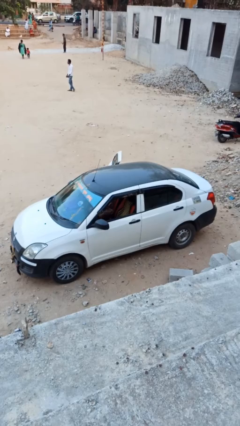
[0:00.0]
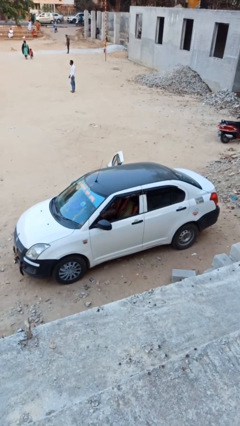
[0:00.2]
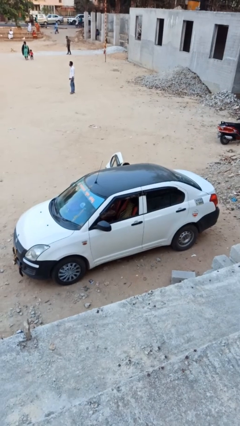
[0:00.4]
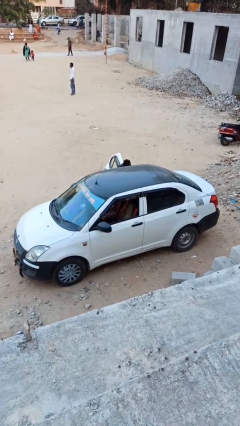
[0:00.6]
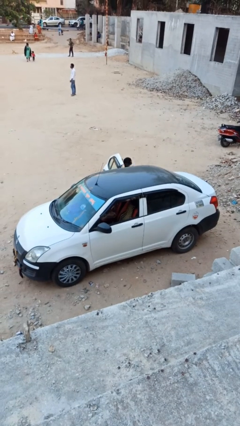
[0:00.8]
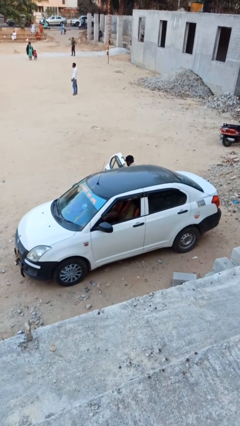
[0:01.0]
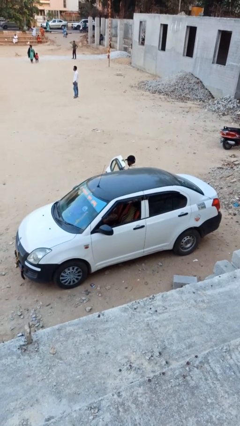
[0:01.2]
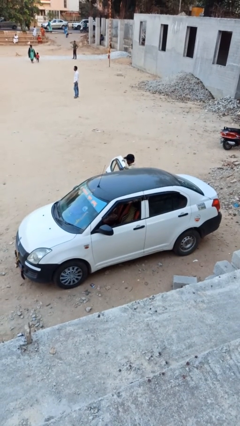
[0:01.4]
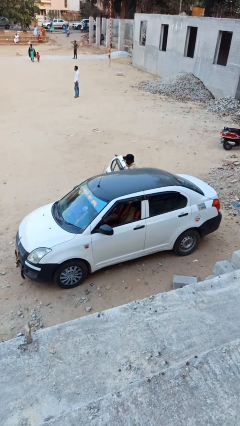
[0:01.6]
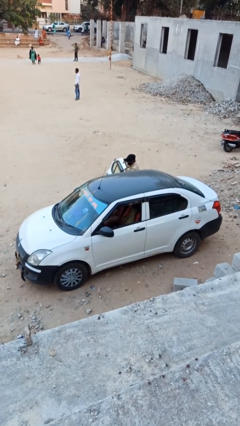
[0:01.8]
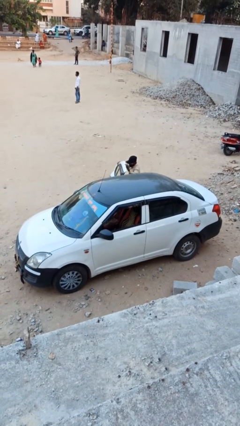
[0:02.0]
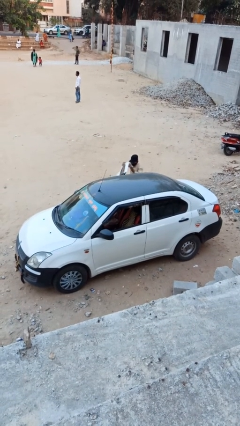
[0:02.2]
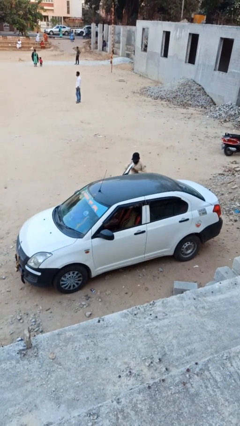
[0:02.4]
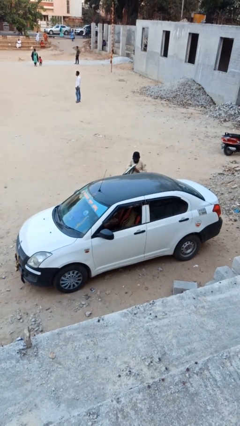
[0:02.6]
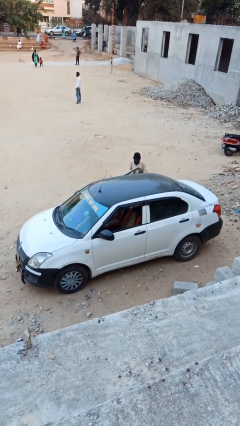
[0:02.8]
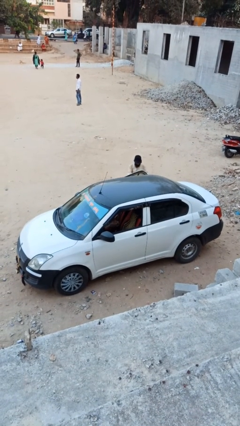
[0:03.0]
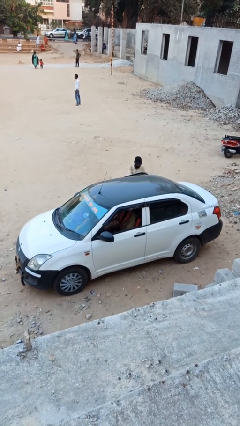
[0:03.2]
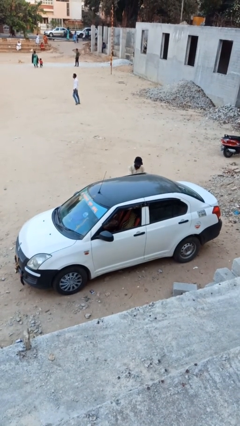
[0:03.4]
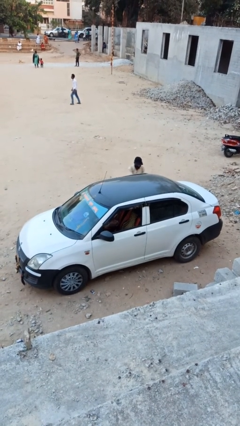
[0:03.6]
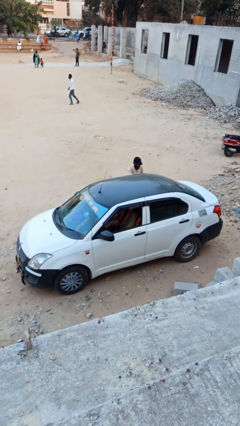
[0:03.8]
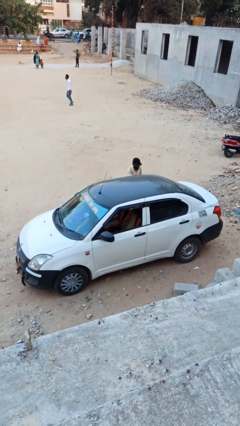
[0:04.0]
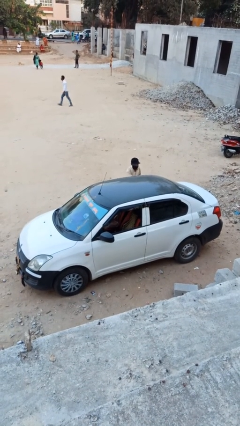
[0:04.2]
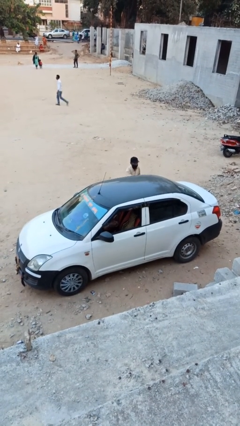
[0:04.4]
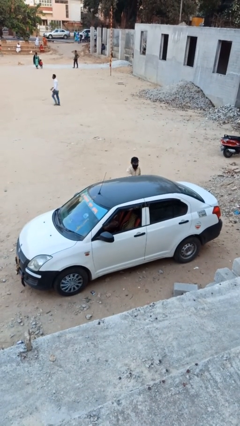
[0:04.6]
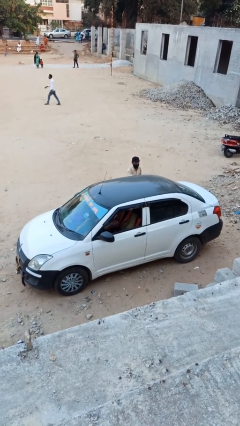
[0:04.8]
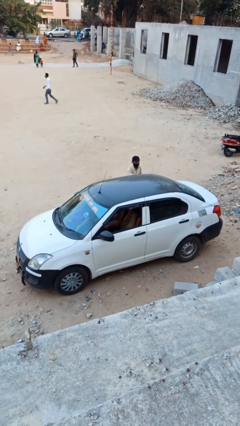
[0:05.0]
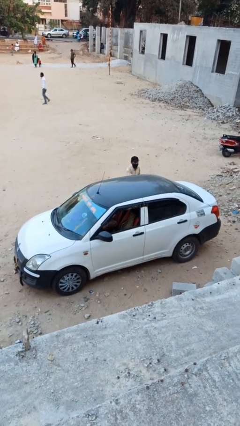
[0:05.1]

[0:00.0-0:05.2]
car drops off person

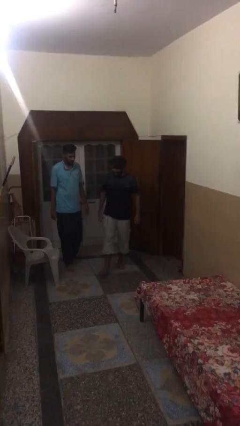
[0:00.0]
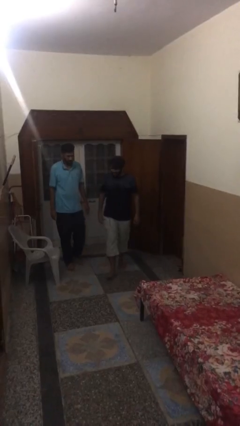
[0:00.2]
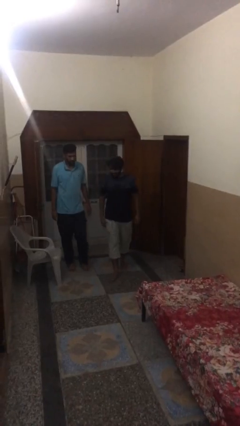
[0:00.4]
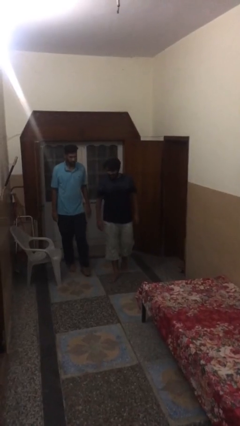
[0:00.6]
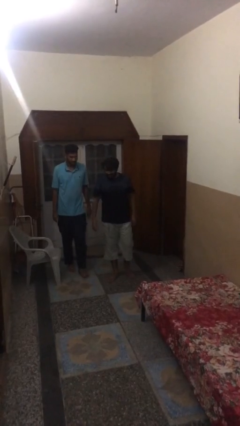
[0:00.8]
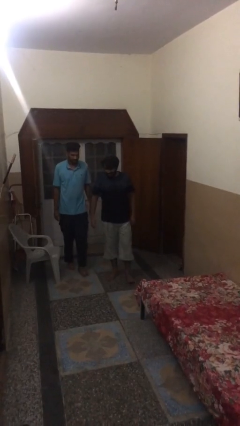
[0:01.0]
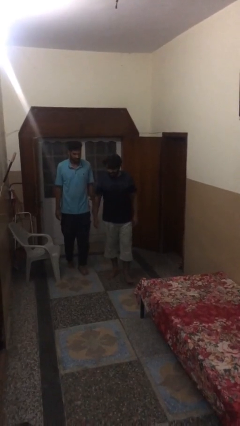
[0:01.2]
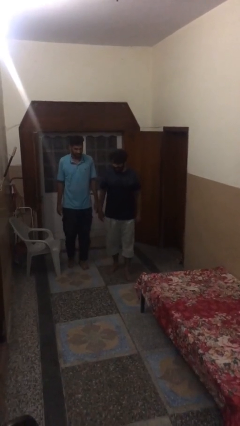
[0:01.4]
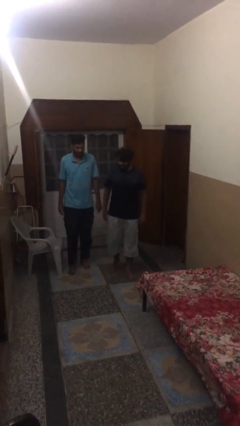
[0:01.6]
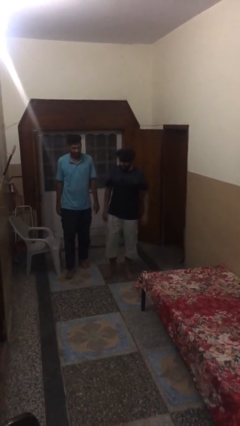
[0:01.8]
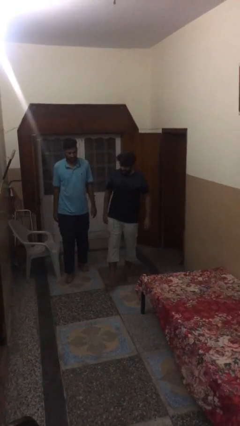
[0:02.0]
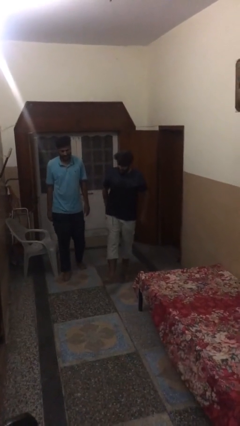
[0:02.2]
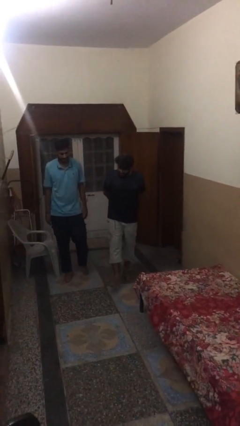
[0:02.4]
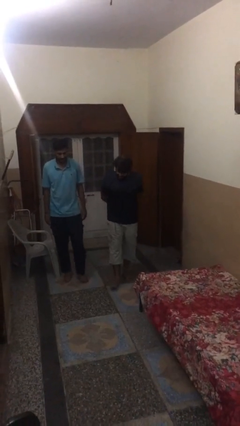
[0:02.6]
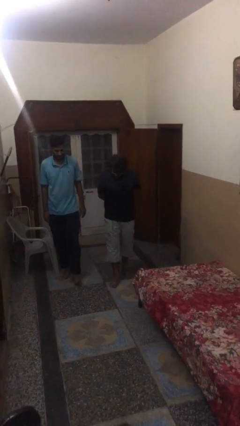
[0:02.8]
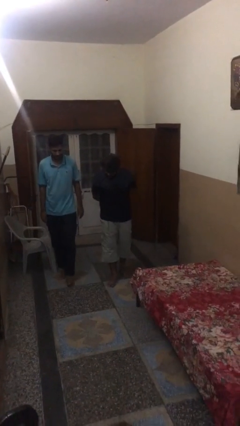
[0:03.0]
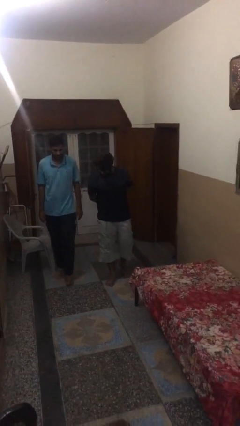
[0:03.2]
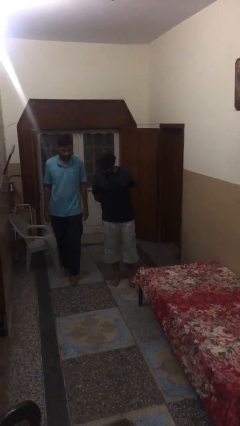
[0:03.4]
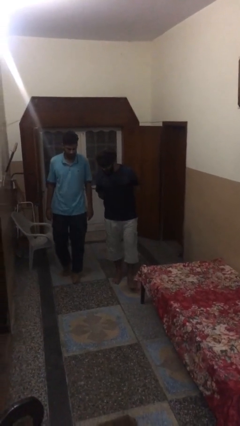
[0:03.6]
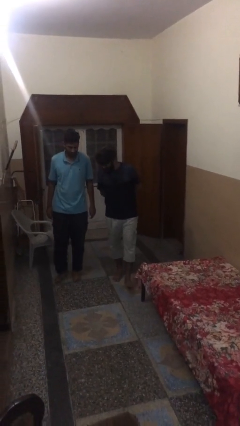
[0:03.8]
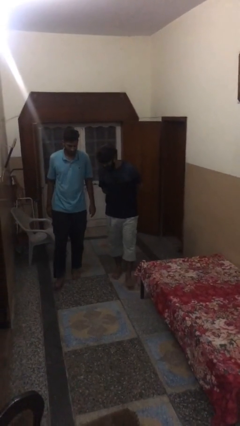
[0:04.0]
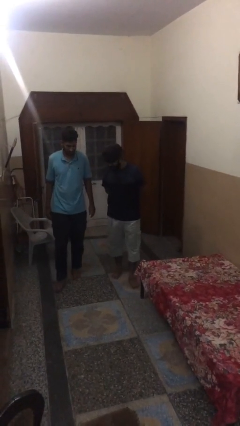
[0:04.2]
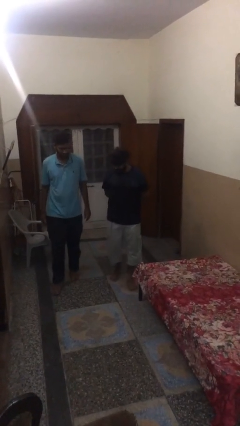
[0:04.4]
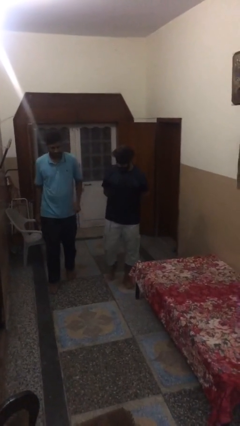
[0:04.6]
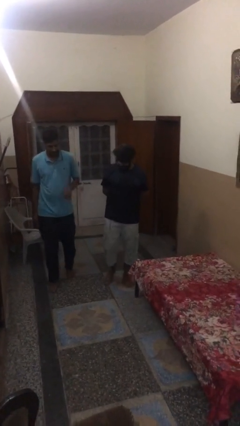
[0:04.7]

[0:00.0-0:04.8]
person talks to person

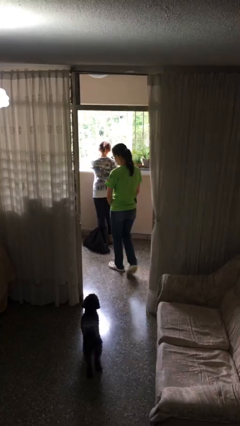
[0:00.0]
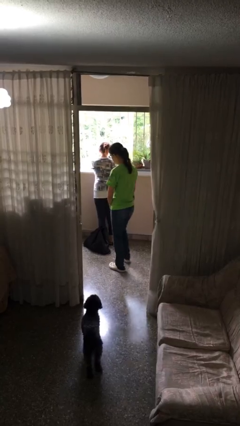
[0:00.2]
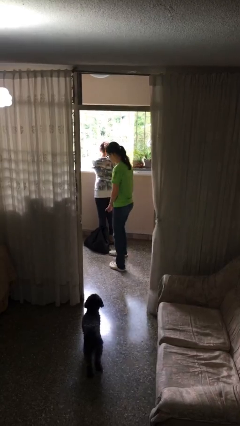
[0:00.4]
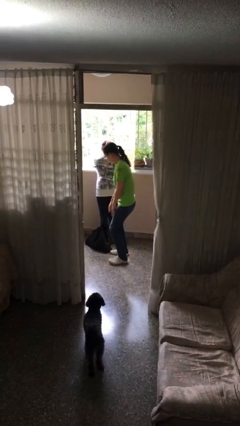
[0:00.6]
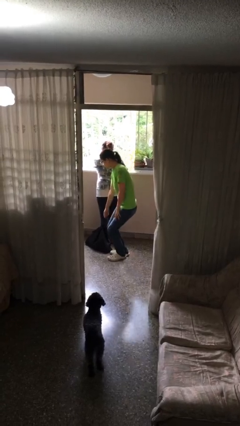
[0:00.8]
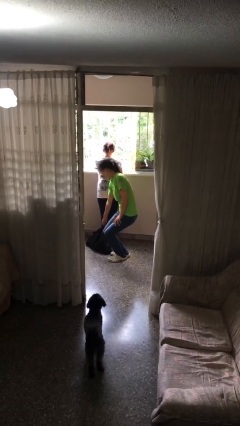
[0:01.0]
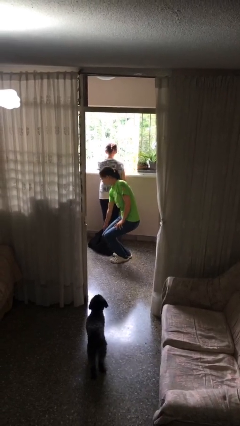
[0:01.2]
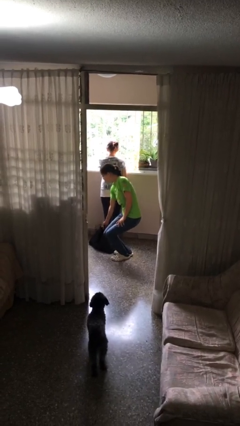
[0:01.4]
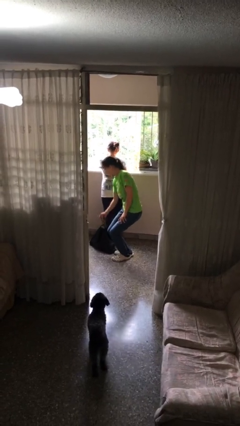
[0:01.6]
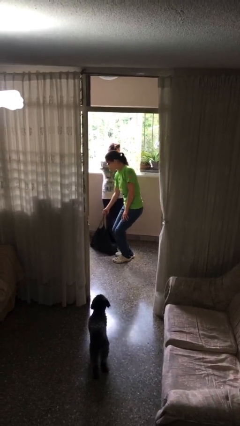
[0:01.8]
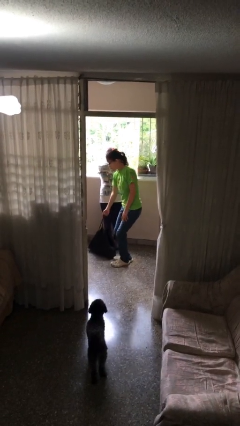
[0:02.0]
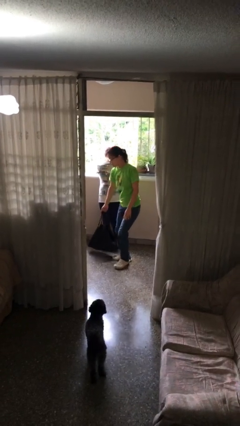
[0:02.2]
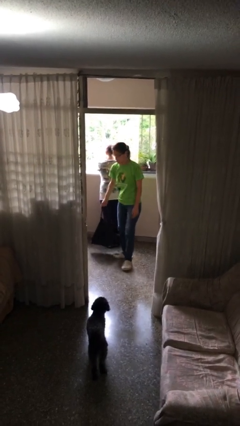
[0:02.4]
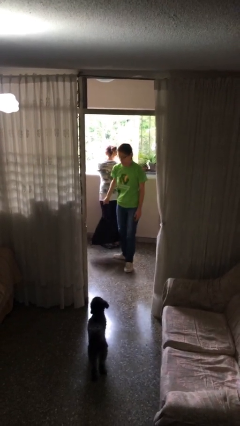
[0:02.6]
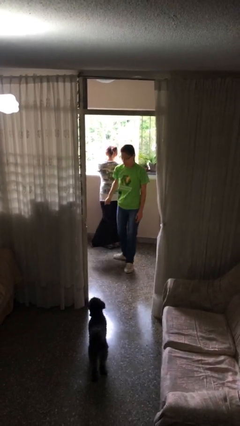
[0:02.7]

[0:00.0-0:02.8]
person steals object from person

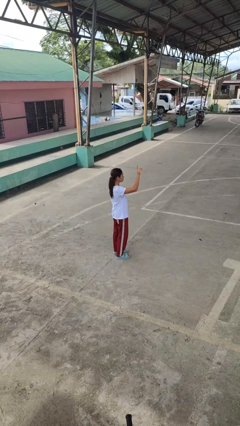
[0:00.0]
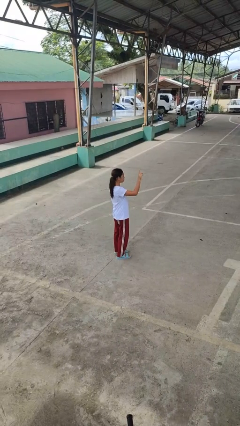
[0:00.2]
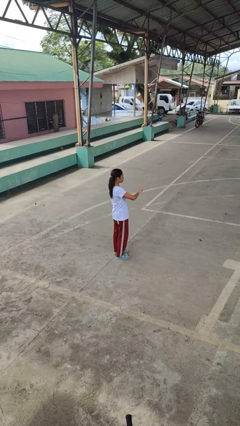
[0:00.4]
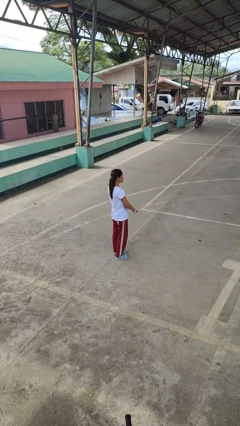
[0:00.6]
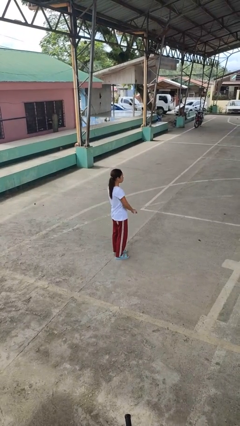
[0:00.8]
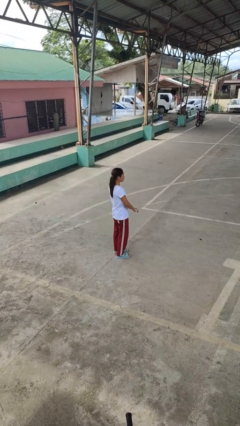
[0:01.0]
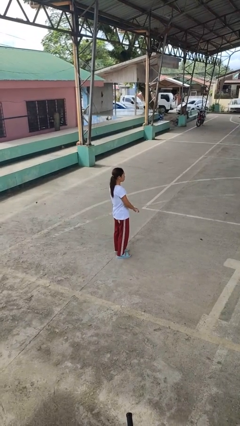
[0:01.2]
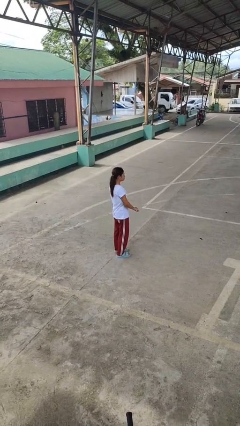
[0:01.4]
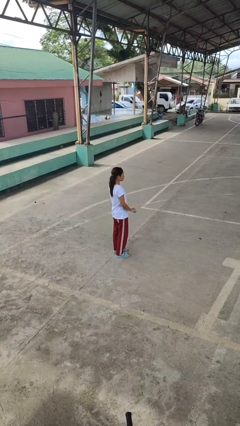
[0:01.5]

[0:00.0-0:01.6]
person gestures swipe down

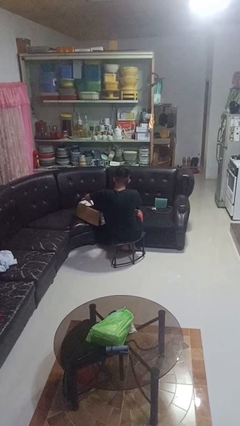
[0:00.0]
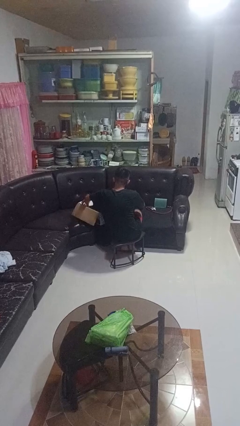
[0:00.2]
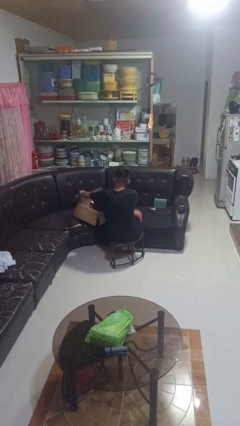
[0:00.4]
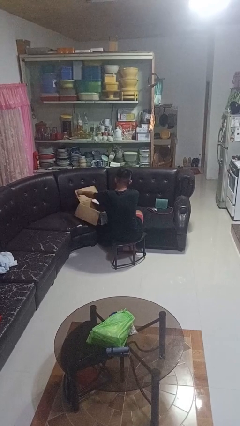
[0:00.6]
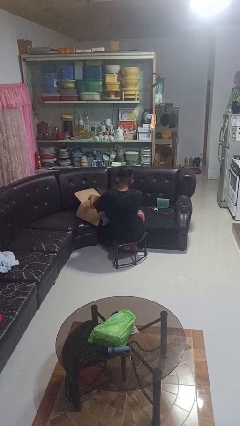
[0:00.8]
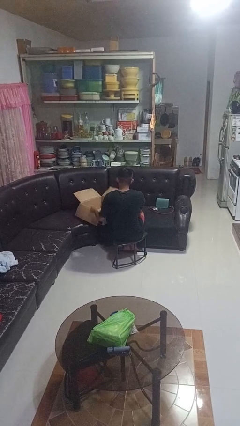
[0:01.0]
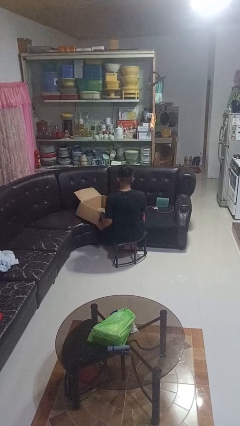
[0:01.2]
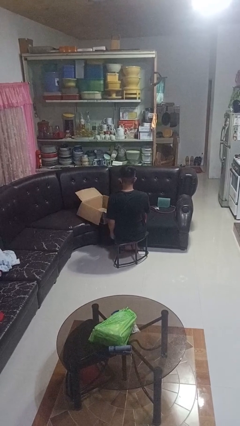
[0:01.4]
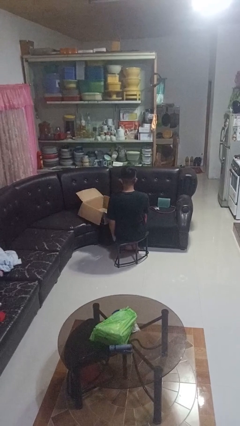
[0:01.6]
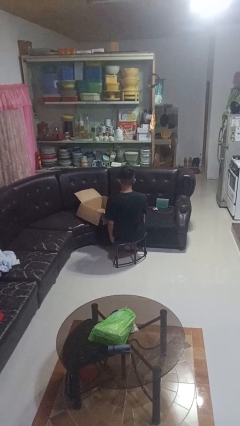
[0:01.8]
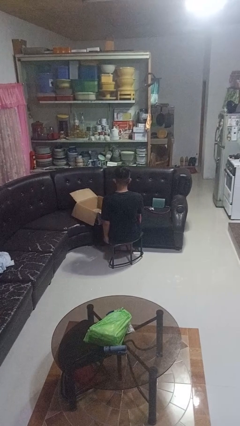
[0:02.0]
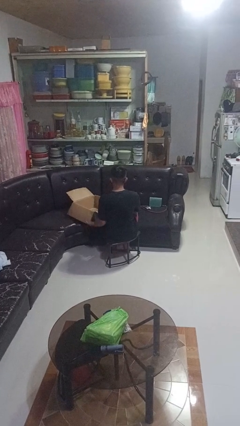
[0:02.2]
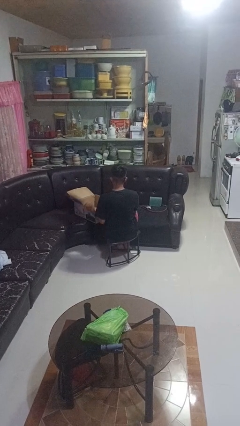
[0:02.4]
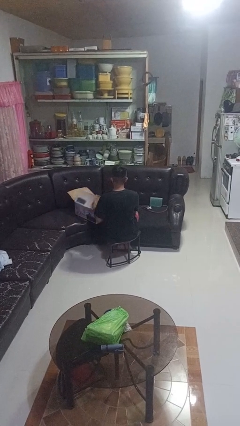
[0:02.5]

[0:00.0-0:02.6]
person opens box

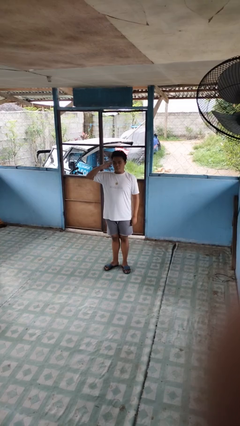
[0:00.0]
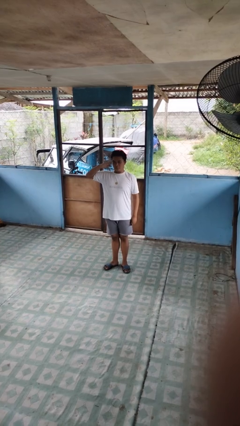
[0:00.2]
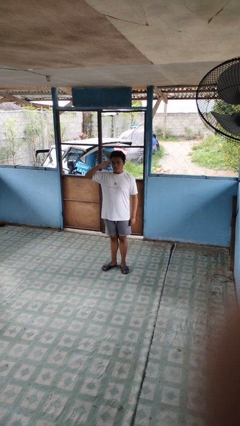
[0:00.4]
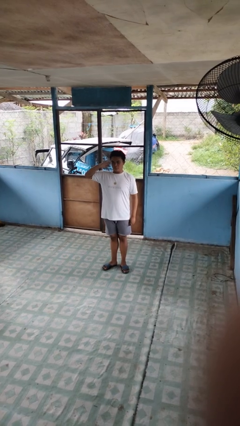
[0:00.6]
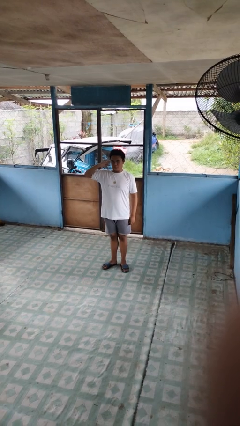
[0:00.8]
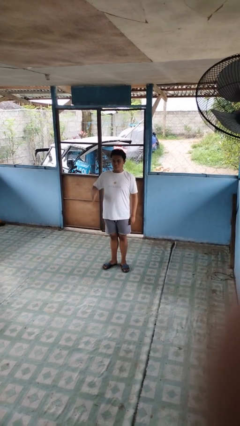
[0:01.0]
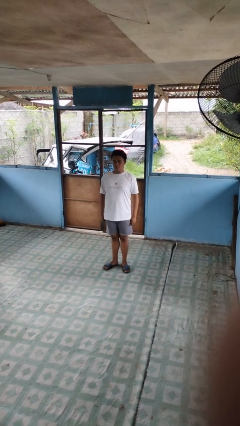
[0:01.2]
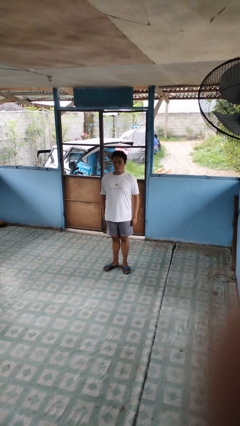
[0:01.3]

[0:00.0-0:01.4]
person salutes
